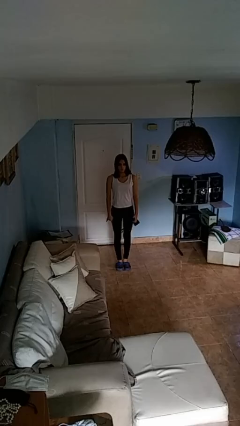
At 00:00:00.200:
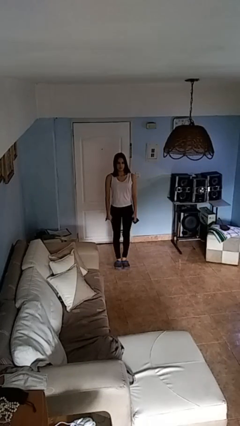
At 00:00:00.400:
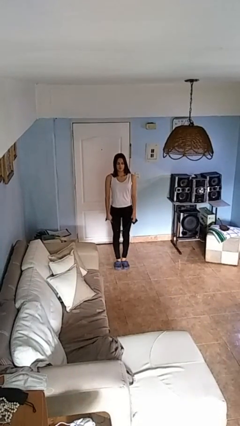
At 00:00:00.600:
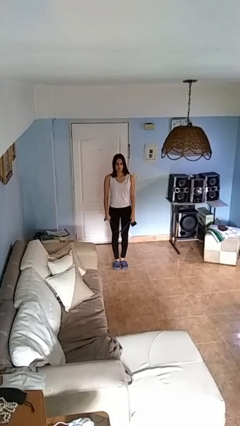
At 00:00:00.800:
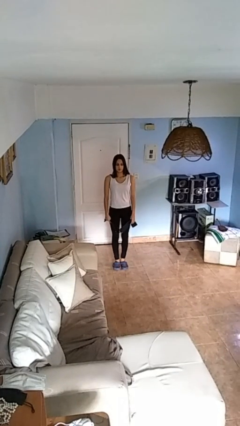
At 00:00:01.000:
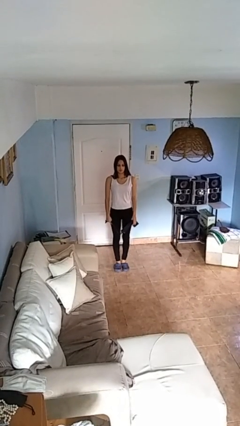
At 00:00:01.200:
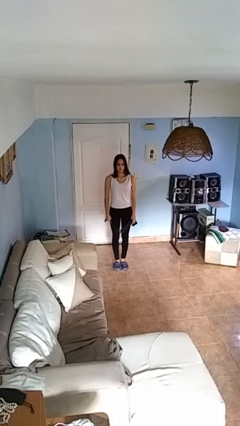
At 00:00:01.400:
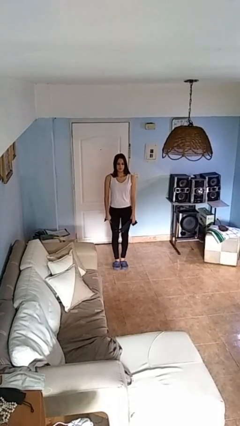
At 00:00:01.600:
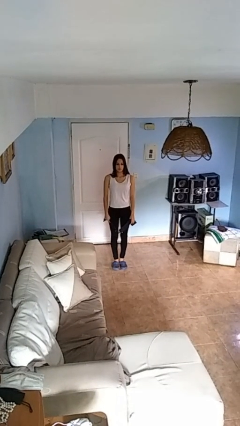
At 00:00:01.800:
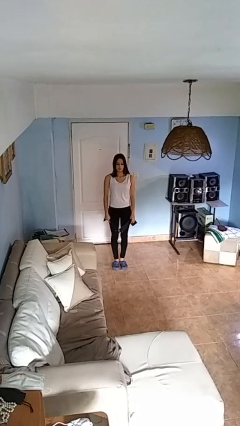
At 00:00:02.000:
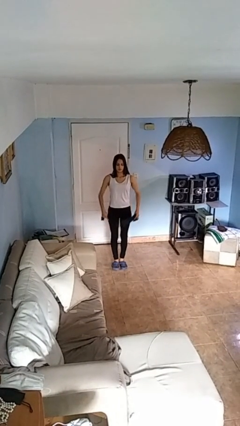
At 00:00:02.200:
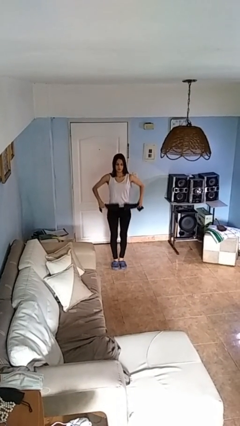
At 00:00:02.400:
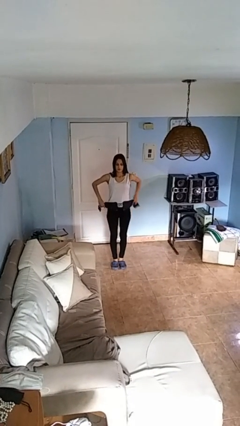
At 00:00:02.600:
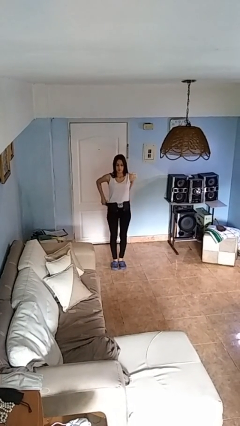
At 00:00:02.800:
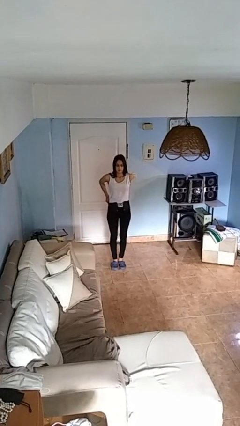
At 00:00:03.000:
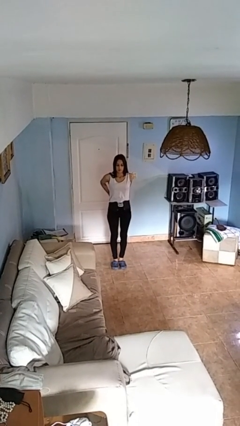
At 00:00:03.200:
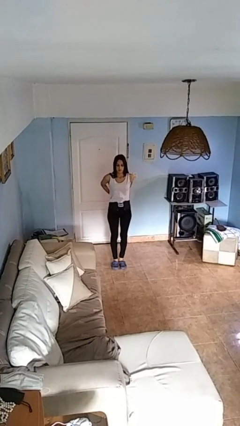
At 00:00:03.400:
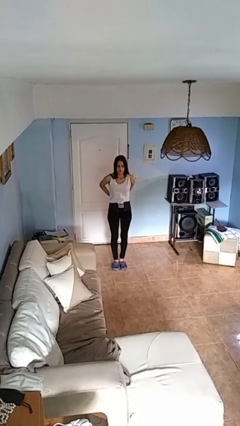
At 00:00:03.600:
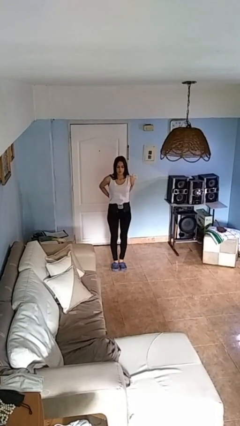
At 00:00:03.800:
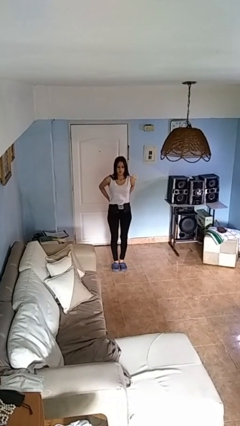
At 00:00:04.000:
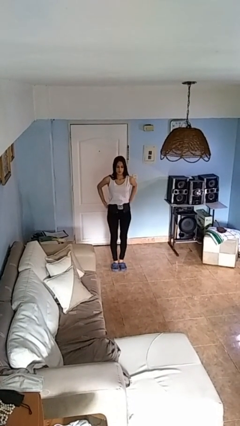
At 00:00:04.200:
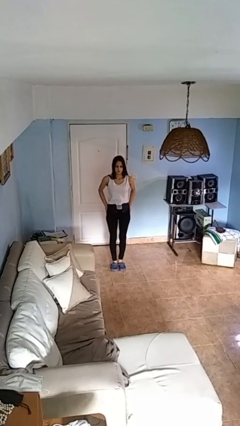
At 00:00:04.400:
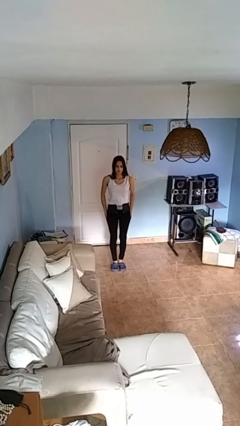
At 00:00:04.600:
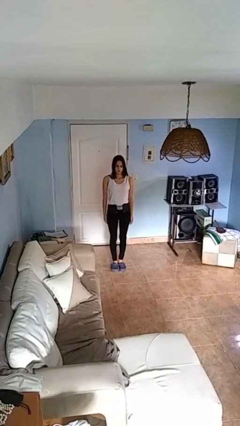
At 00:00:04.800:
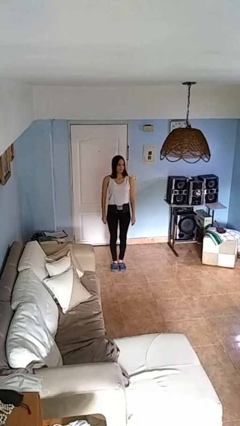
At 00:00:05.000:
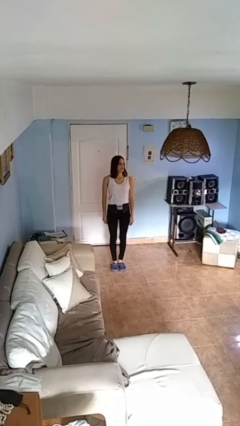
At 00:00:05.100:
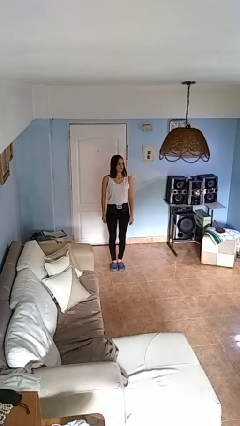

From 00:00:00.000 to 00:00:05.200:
person puts on belt

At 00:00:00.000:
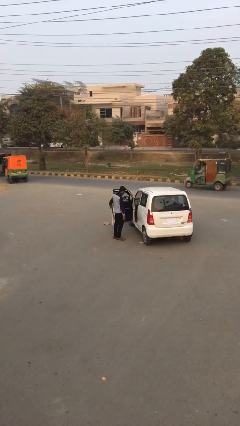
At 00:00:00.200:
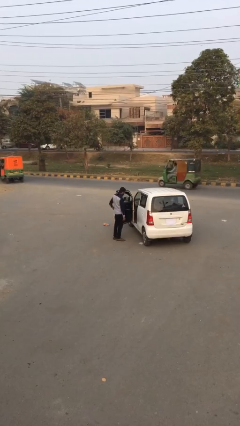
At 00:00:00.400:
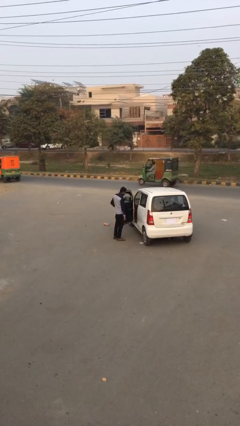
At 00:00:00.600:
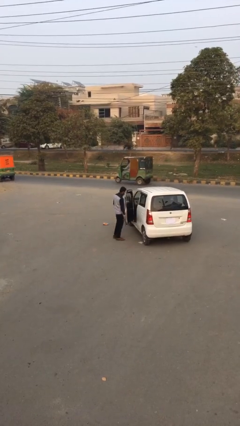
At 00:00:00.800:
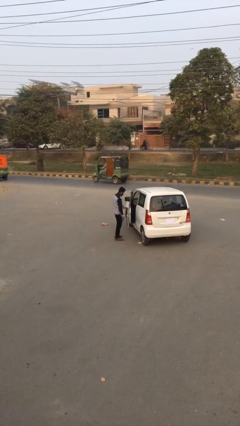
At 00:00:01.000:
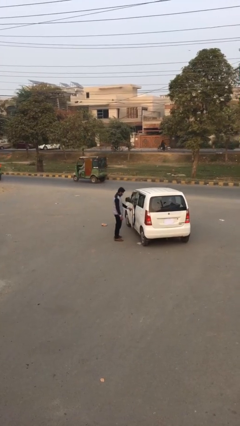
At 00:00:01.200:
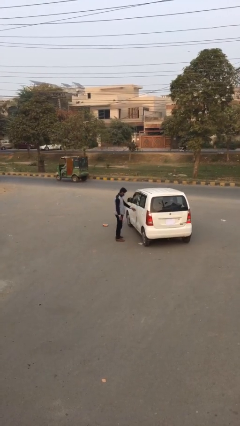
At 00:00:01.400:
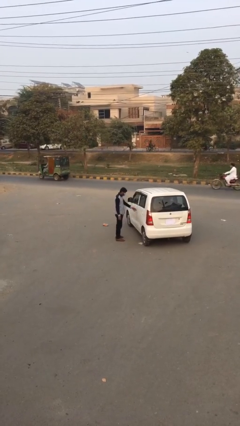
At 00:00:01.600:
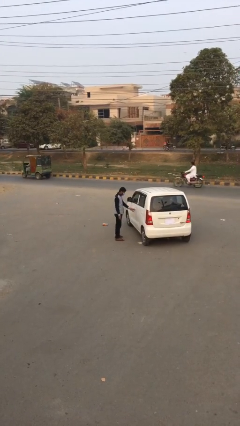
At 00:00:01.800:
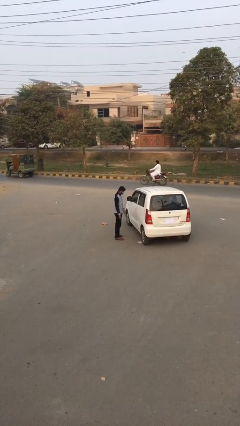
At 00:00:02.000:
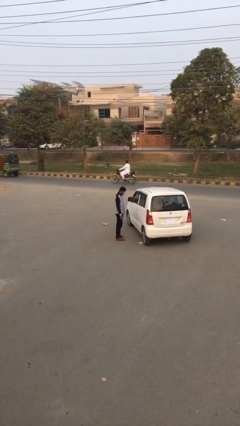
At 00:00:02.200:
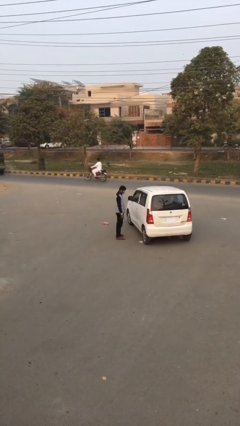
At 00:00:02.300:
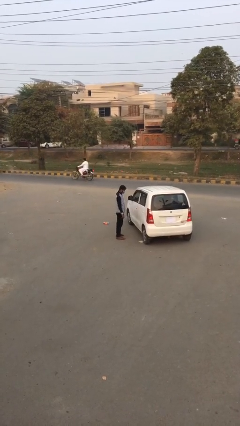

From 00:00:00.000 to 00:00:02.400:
person closes car door

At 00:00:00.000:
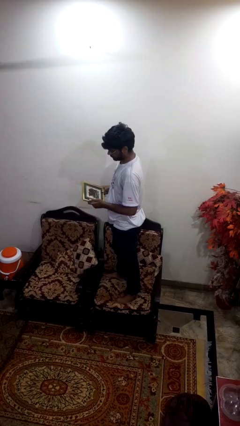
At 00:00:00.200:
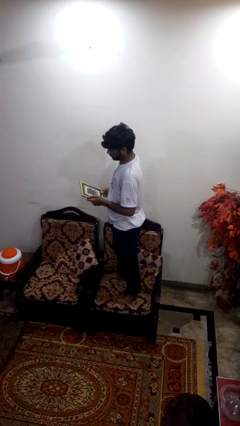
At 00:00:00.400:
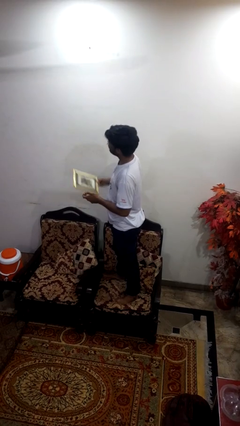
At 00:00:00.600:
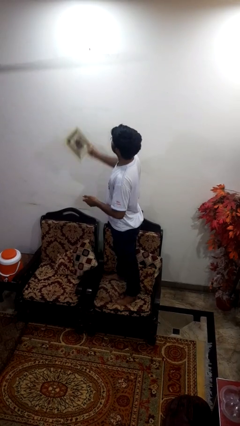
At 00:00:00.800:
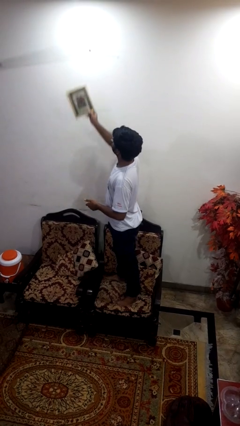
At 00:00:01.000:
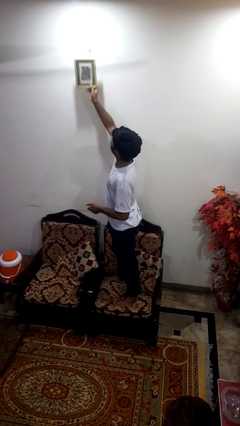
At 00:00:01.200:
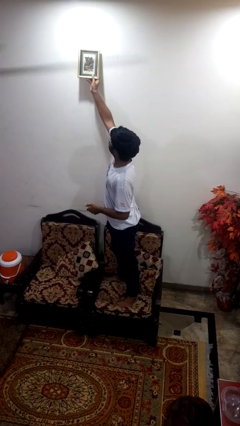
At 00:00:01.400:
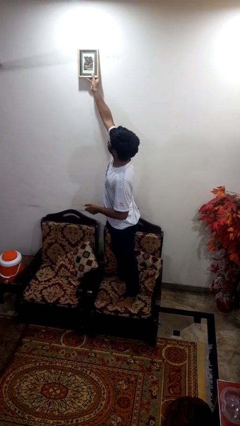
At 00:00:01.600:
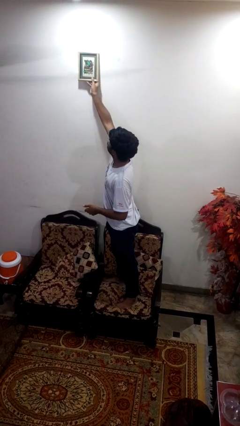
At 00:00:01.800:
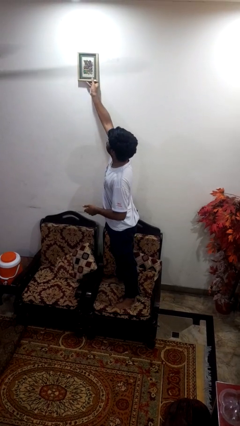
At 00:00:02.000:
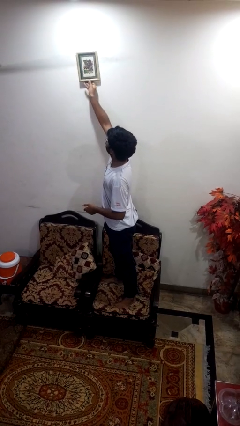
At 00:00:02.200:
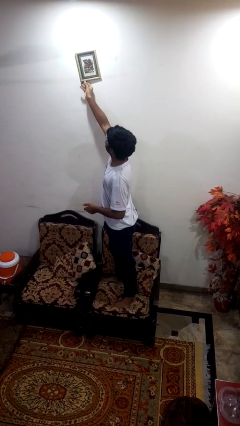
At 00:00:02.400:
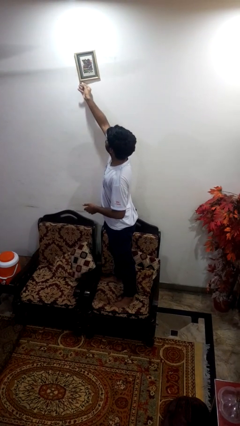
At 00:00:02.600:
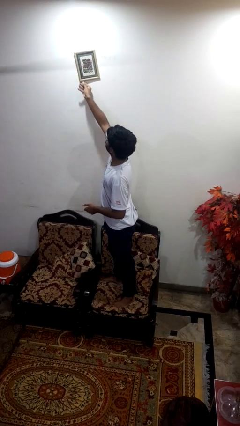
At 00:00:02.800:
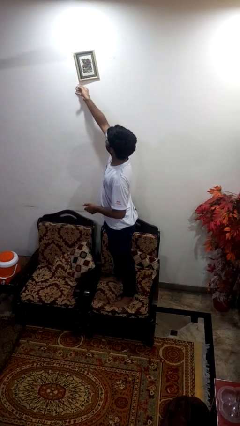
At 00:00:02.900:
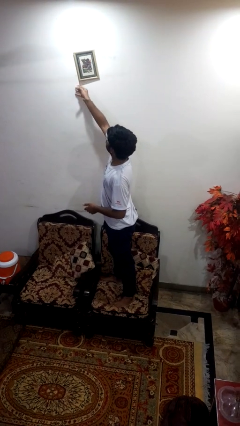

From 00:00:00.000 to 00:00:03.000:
person puts up picture frame

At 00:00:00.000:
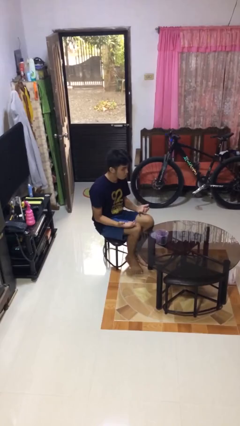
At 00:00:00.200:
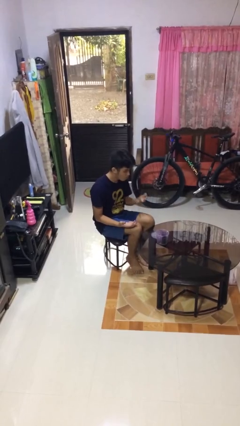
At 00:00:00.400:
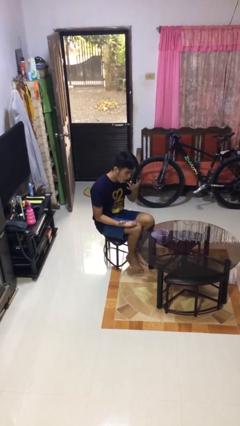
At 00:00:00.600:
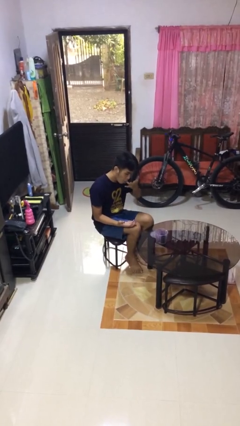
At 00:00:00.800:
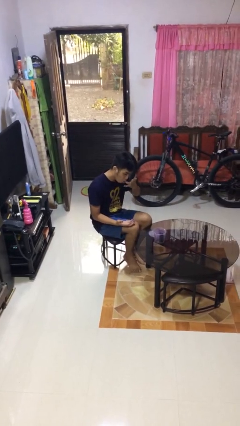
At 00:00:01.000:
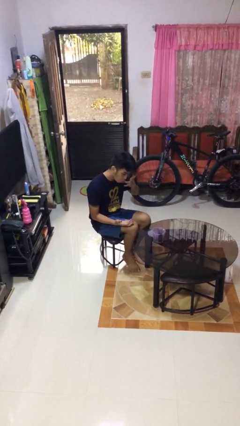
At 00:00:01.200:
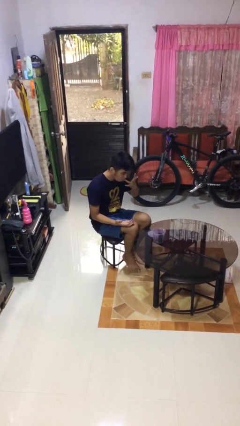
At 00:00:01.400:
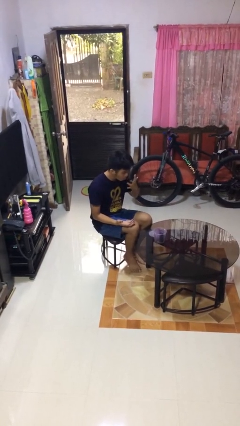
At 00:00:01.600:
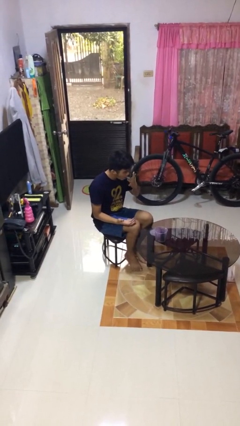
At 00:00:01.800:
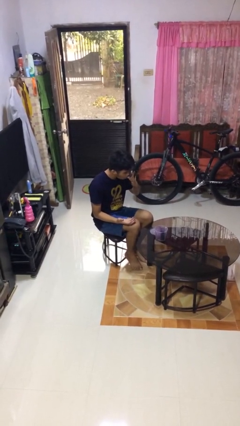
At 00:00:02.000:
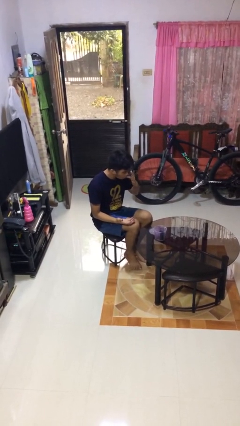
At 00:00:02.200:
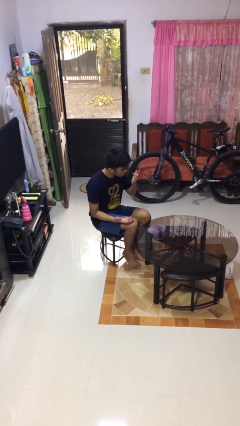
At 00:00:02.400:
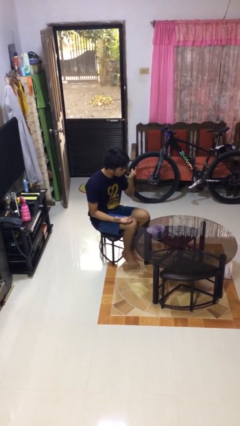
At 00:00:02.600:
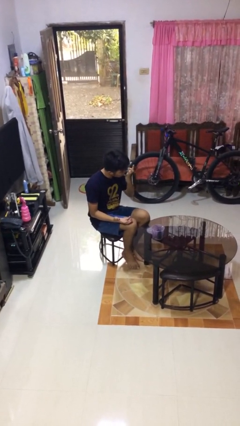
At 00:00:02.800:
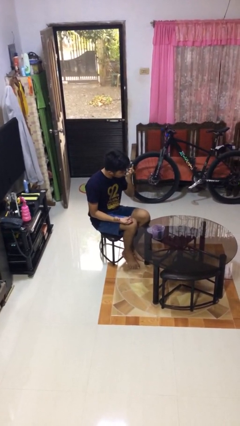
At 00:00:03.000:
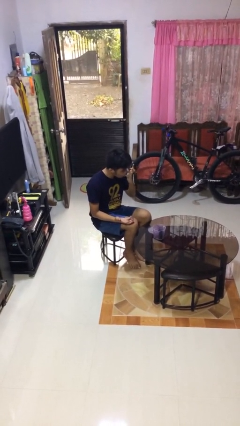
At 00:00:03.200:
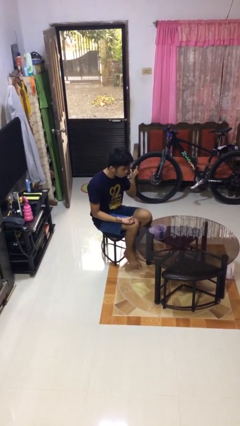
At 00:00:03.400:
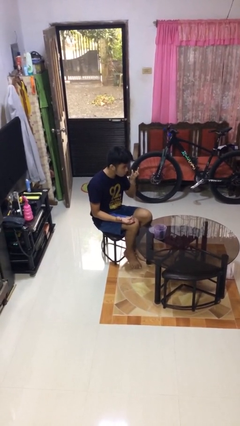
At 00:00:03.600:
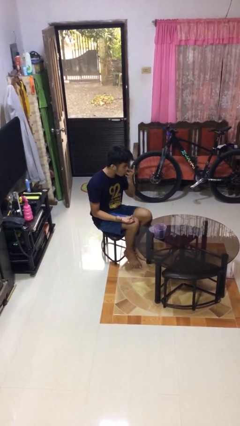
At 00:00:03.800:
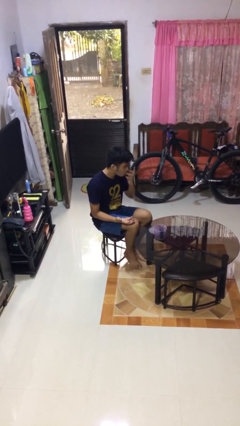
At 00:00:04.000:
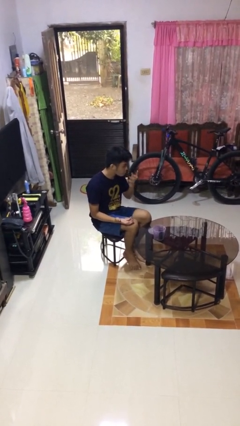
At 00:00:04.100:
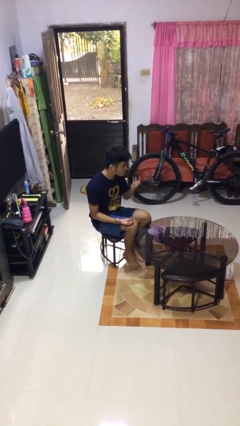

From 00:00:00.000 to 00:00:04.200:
person licks fingers

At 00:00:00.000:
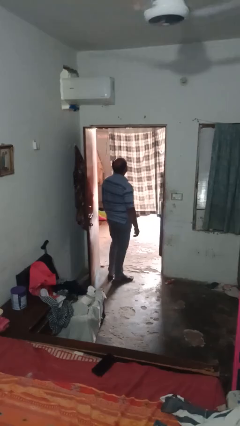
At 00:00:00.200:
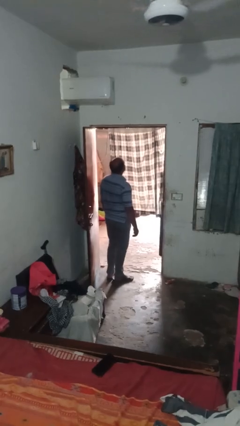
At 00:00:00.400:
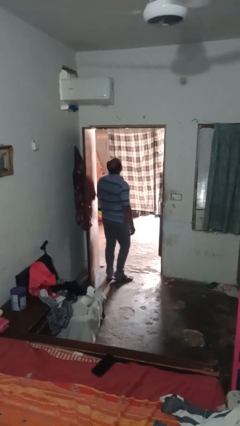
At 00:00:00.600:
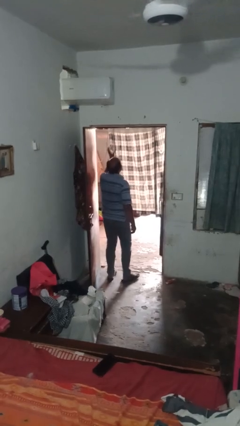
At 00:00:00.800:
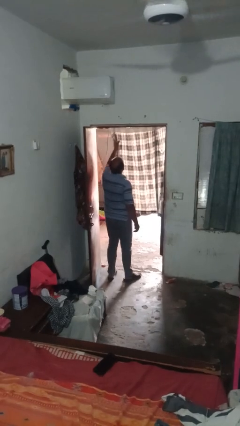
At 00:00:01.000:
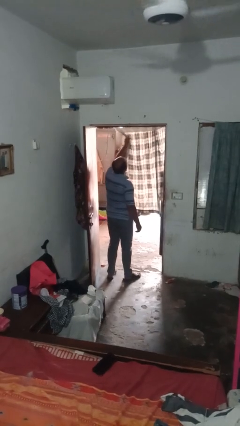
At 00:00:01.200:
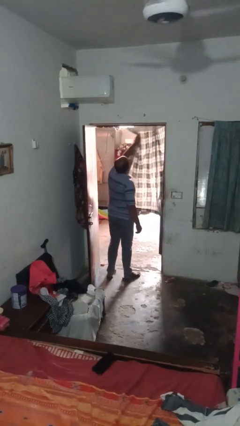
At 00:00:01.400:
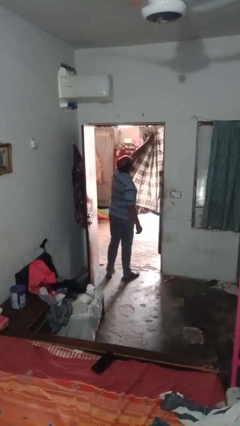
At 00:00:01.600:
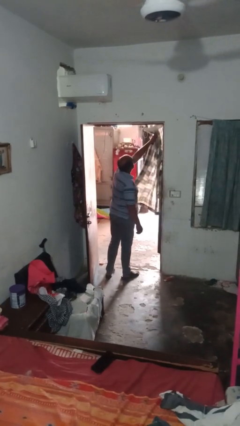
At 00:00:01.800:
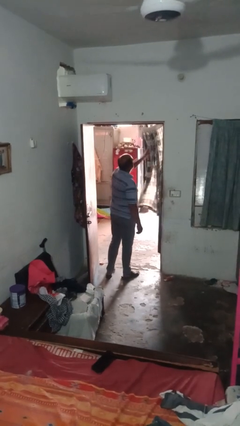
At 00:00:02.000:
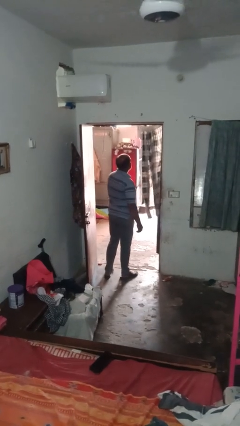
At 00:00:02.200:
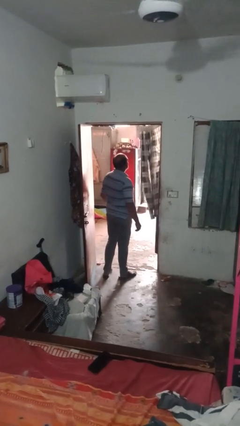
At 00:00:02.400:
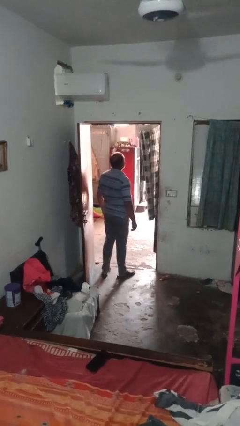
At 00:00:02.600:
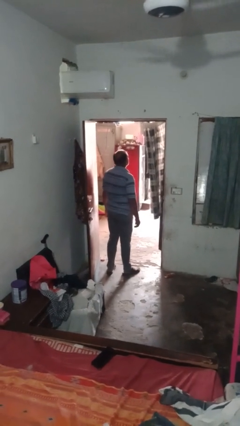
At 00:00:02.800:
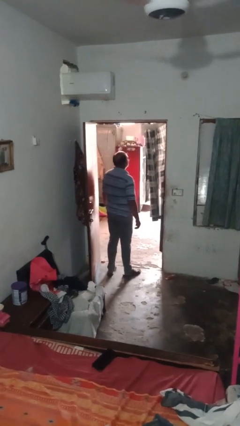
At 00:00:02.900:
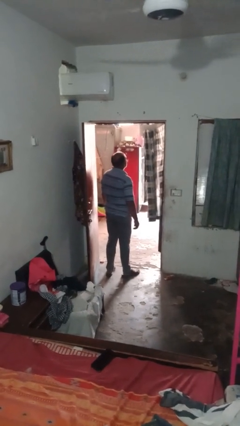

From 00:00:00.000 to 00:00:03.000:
person opens curtains
